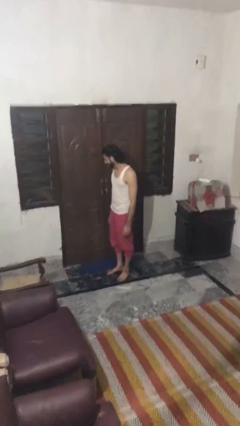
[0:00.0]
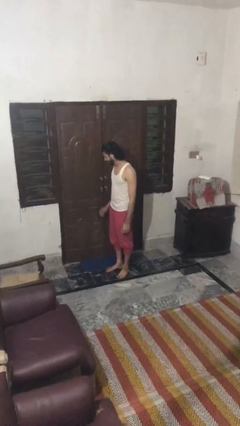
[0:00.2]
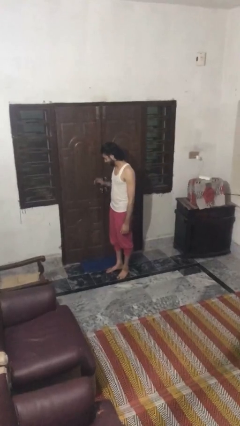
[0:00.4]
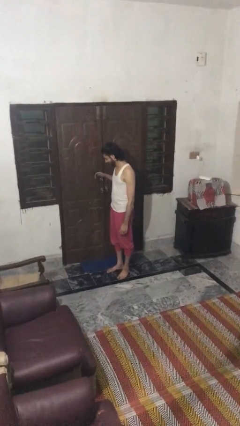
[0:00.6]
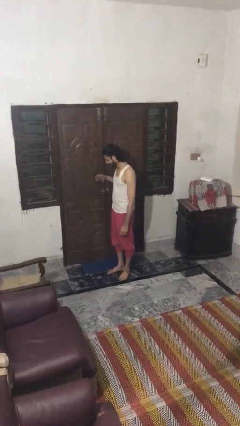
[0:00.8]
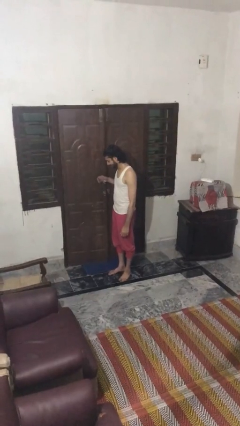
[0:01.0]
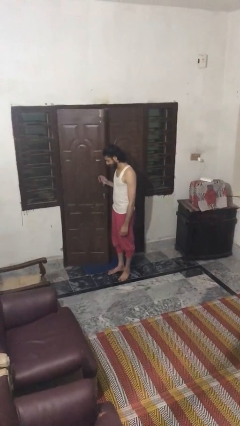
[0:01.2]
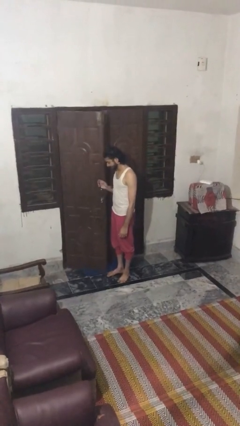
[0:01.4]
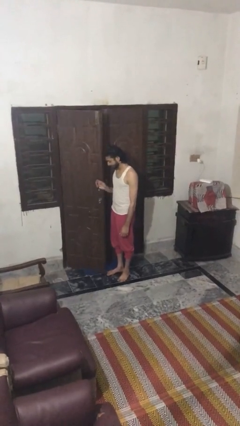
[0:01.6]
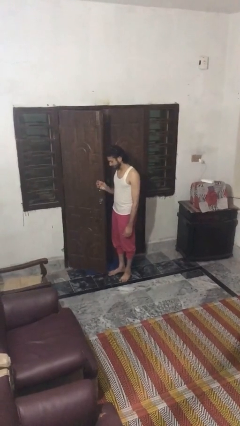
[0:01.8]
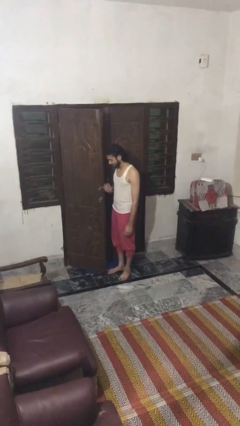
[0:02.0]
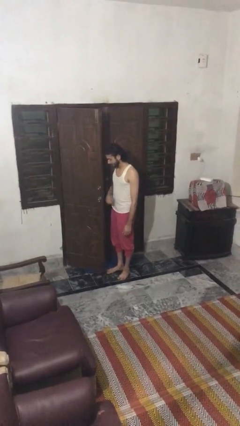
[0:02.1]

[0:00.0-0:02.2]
person opens facility door

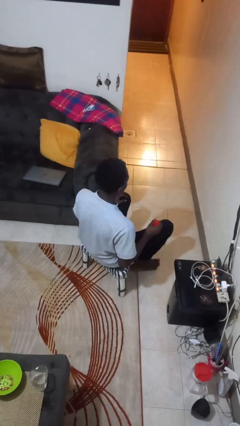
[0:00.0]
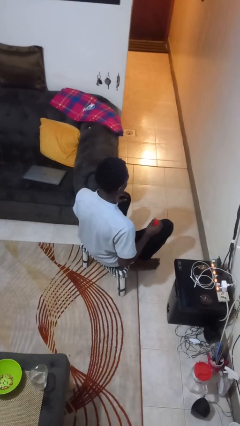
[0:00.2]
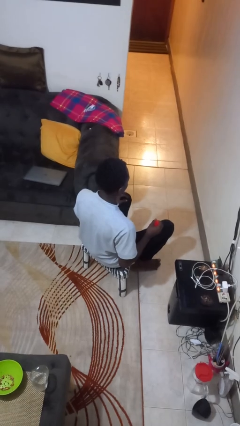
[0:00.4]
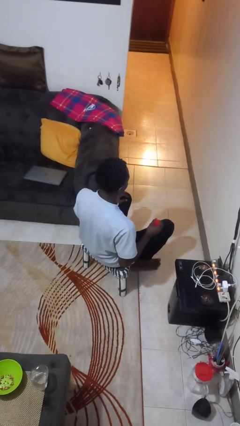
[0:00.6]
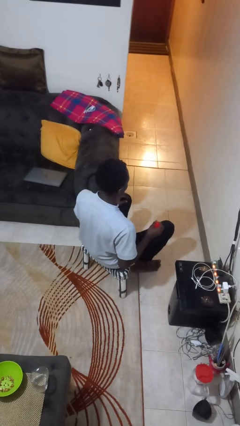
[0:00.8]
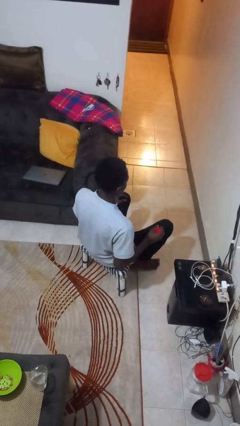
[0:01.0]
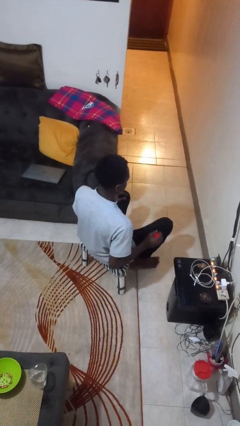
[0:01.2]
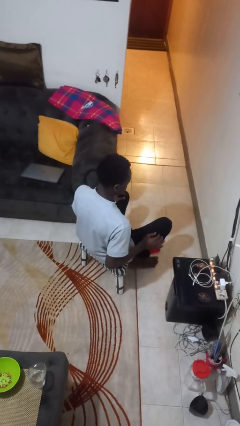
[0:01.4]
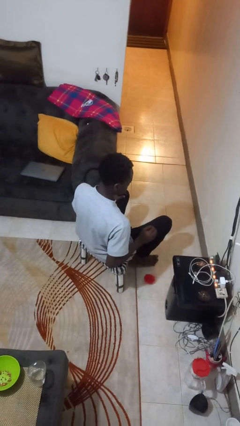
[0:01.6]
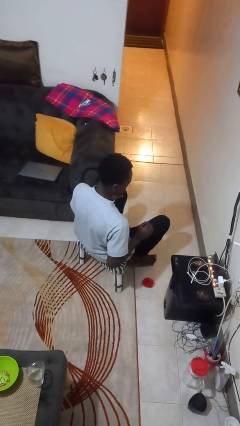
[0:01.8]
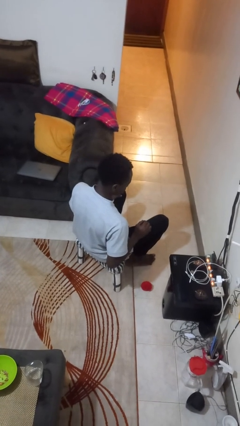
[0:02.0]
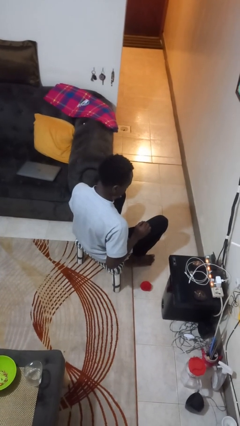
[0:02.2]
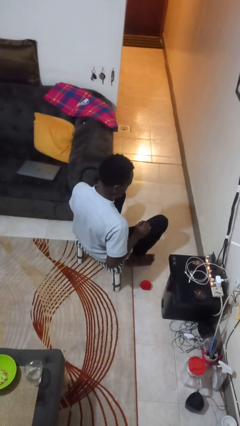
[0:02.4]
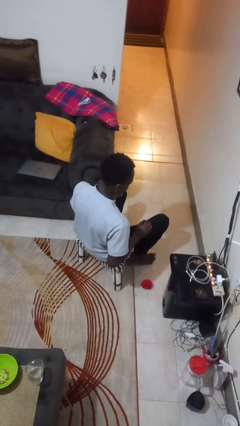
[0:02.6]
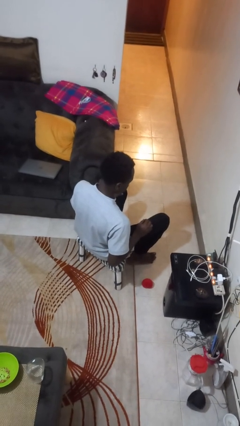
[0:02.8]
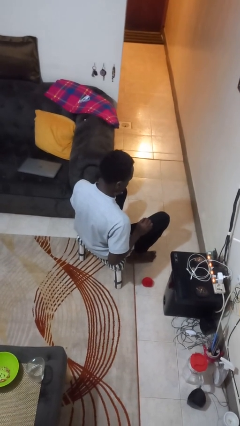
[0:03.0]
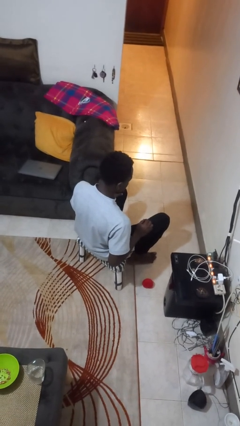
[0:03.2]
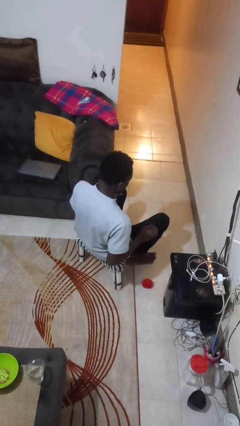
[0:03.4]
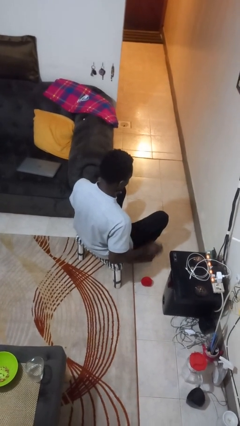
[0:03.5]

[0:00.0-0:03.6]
person drops object

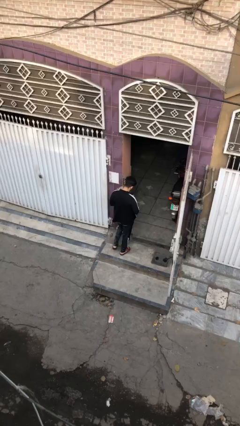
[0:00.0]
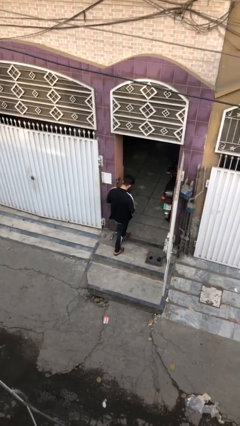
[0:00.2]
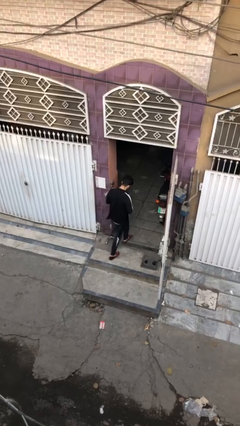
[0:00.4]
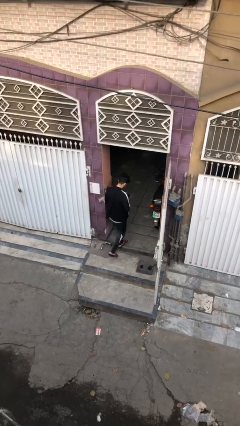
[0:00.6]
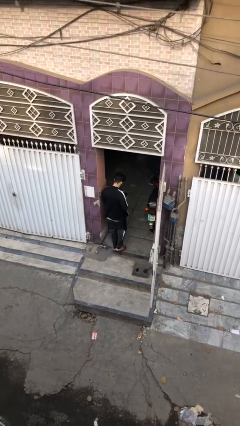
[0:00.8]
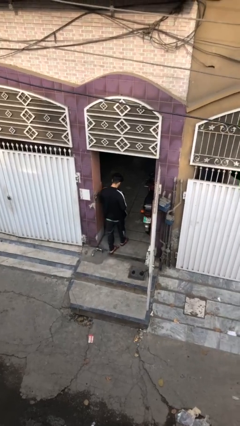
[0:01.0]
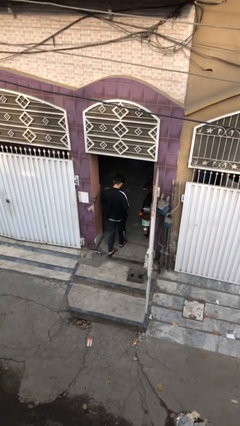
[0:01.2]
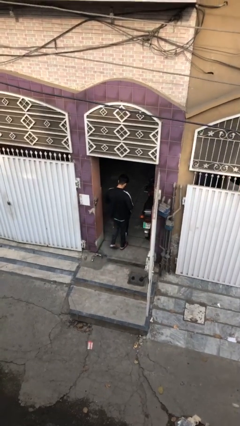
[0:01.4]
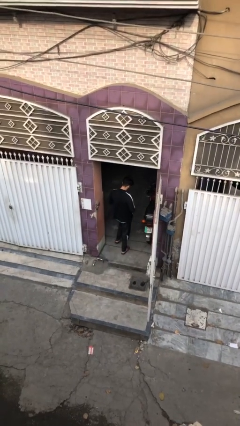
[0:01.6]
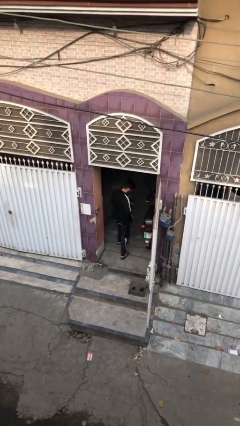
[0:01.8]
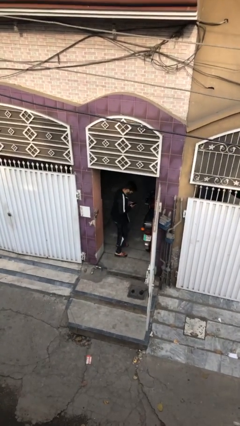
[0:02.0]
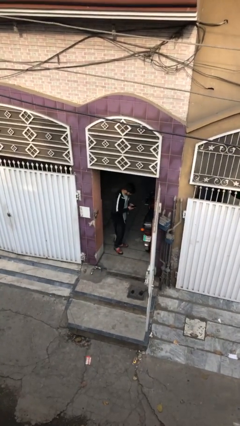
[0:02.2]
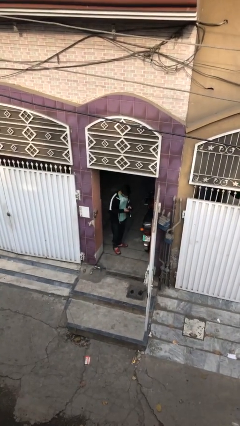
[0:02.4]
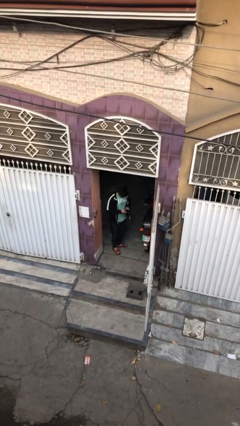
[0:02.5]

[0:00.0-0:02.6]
person exits scene through structure

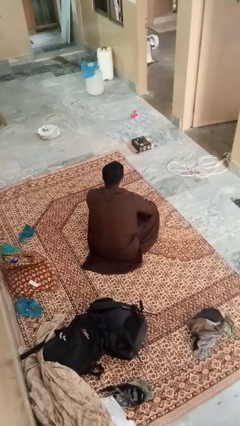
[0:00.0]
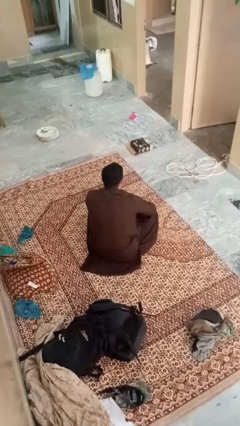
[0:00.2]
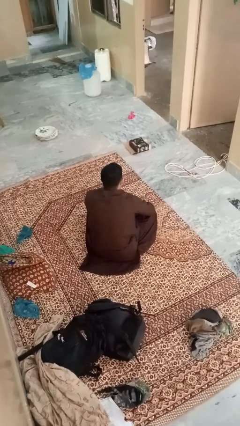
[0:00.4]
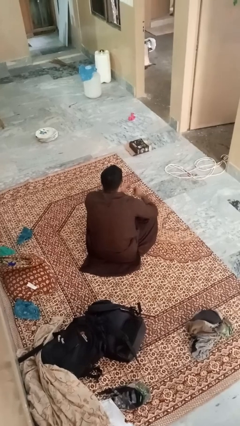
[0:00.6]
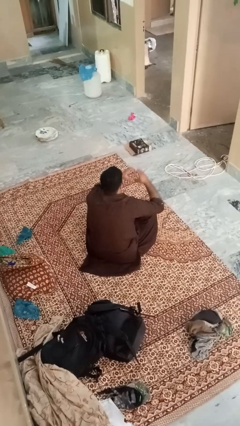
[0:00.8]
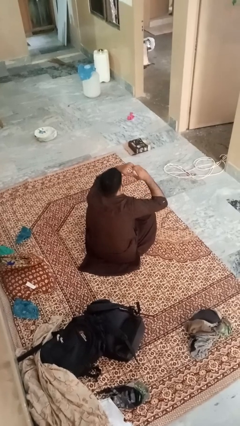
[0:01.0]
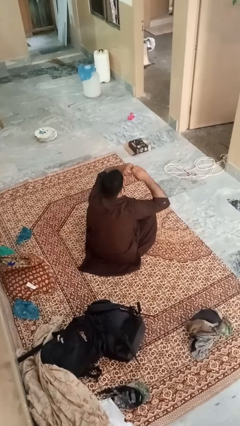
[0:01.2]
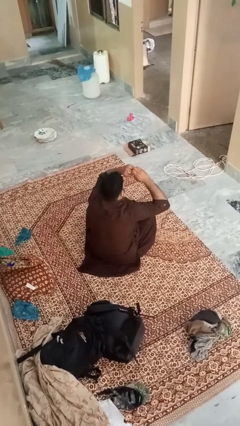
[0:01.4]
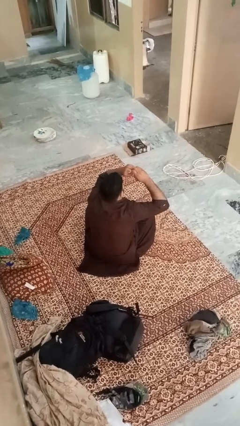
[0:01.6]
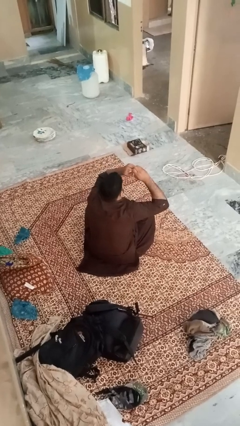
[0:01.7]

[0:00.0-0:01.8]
person gestures heart

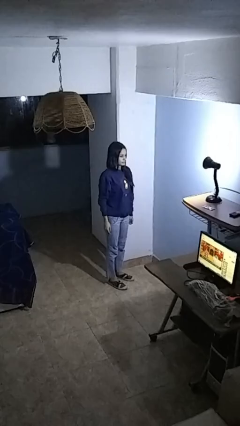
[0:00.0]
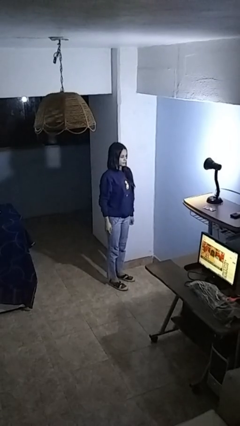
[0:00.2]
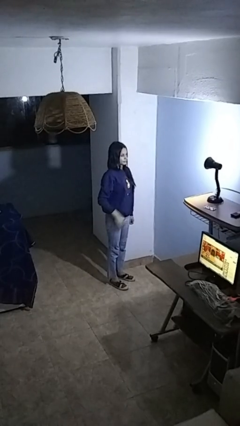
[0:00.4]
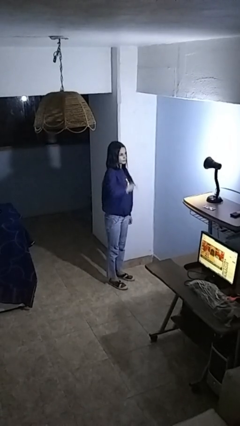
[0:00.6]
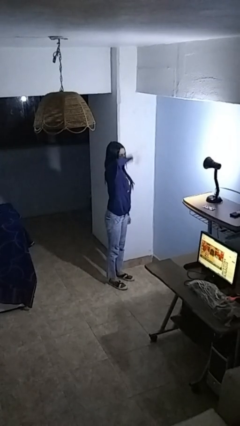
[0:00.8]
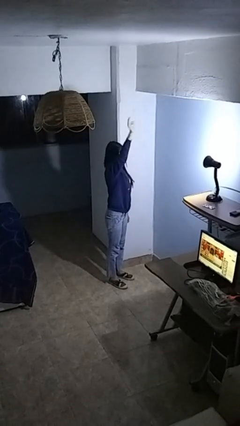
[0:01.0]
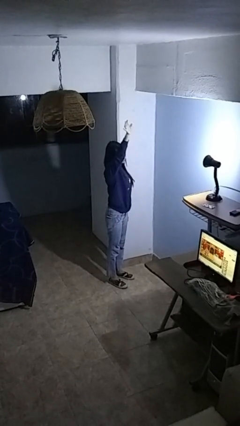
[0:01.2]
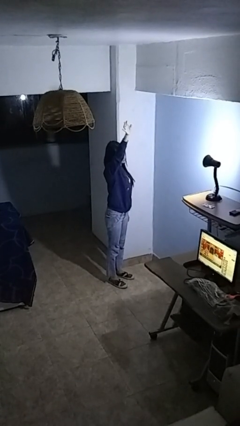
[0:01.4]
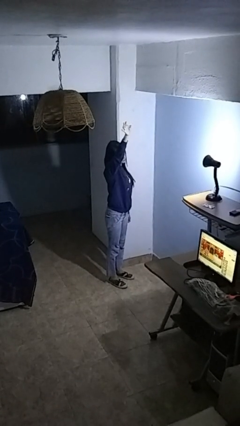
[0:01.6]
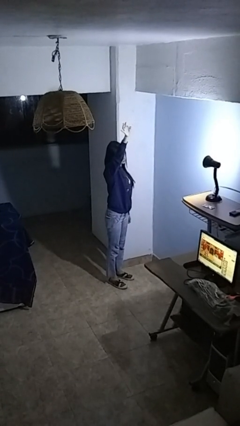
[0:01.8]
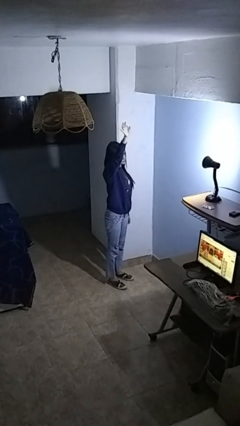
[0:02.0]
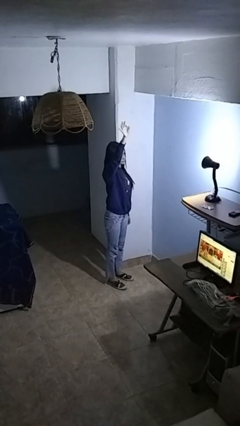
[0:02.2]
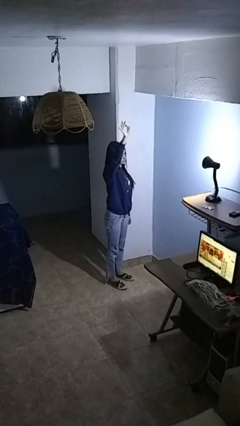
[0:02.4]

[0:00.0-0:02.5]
person gestures swipe up

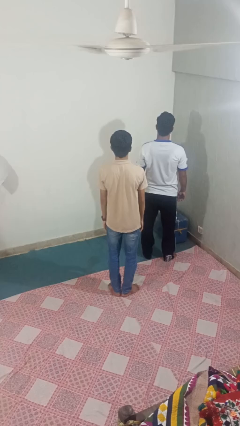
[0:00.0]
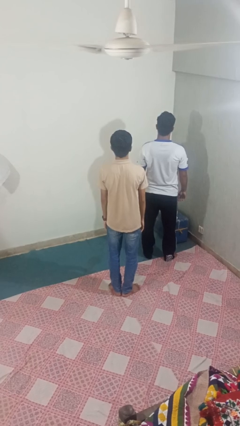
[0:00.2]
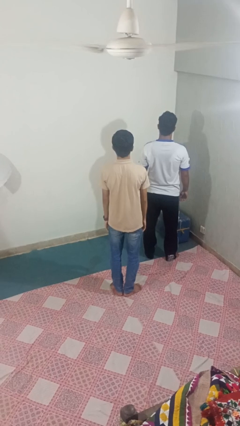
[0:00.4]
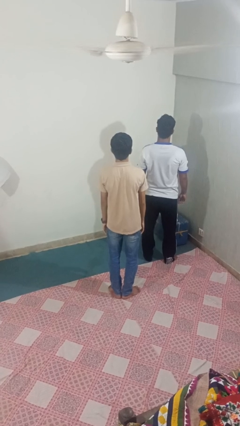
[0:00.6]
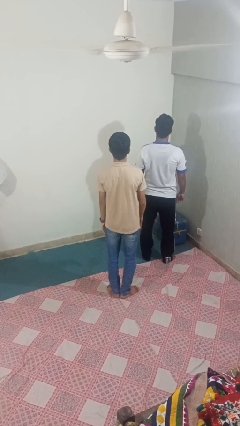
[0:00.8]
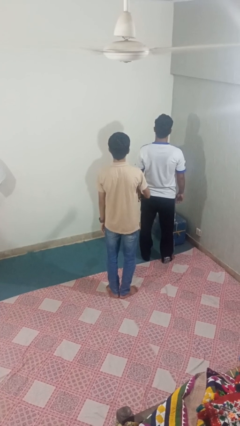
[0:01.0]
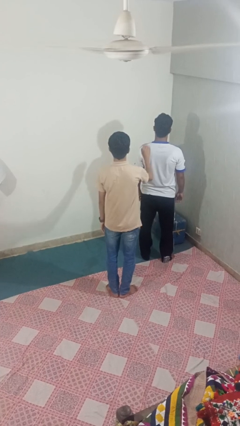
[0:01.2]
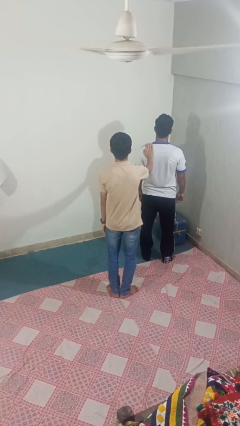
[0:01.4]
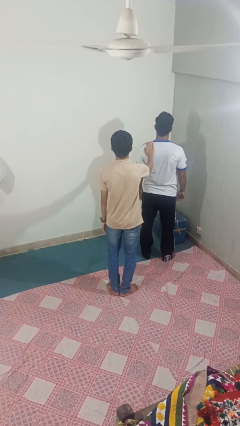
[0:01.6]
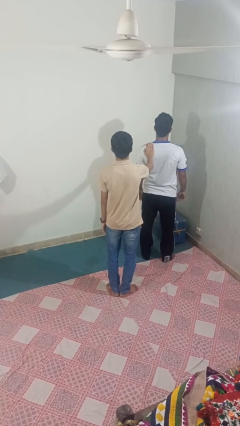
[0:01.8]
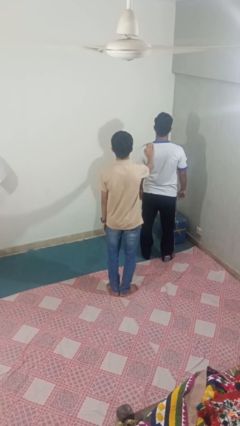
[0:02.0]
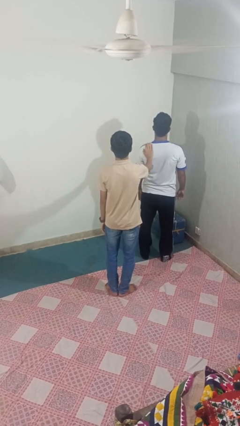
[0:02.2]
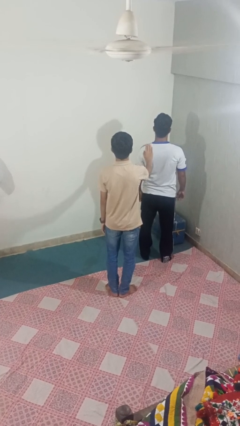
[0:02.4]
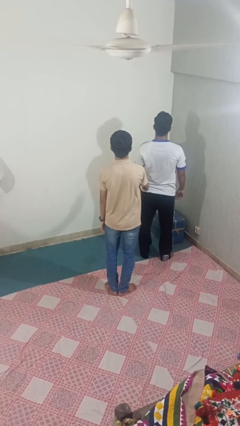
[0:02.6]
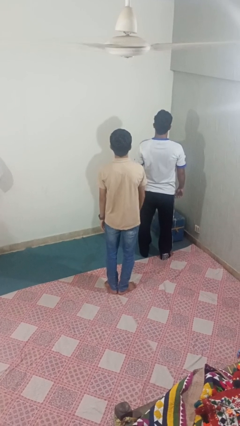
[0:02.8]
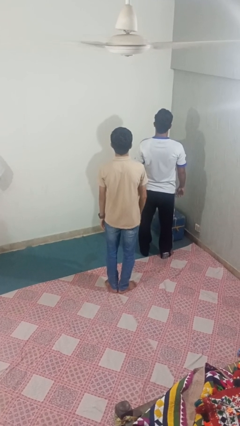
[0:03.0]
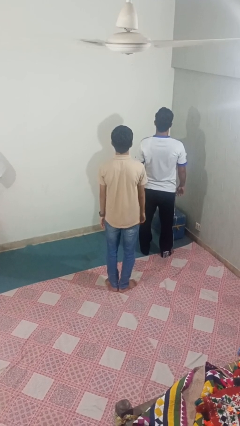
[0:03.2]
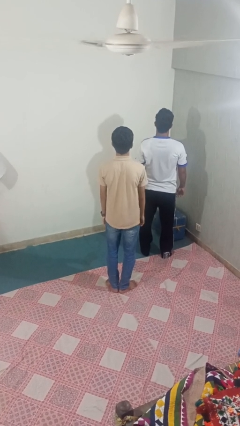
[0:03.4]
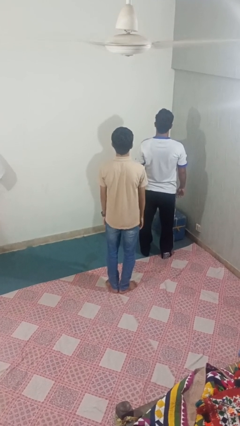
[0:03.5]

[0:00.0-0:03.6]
person touches back of person

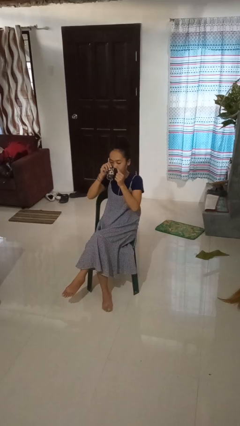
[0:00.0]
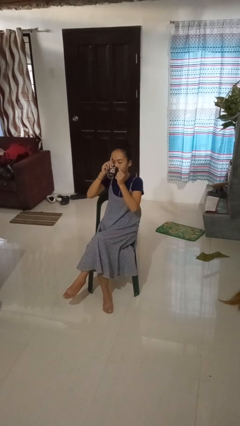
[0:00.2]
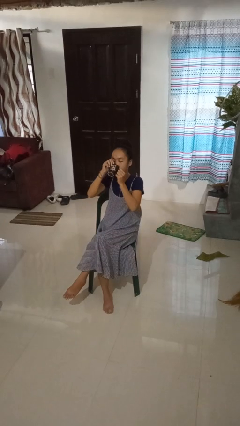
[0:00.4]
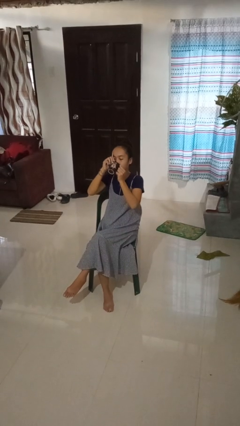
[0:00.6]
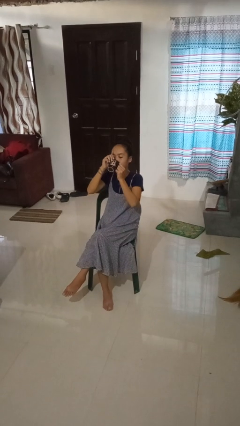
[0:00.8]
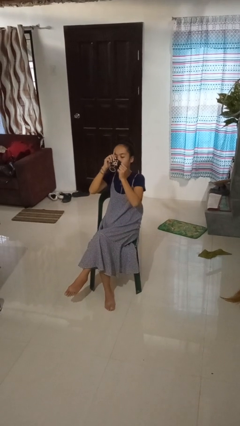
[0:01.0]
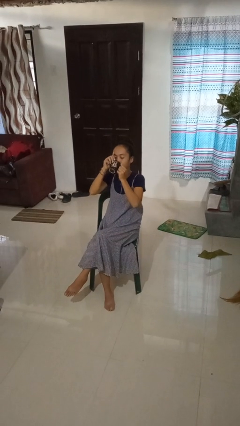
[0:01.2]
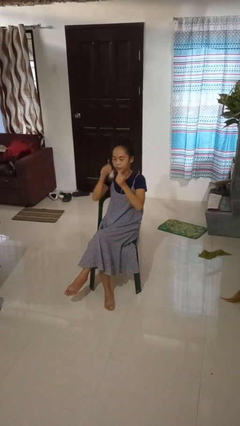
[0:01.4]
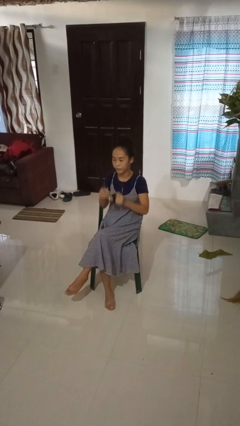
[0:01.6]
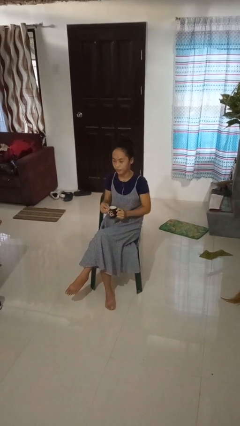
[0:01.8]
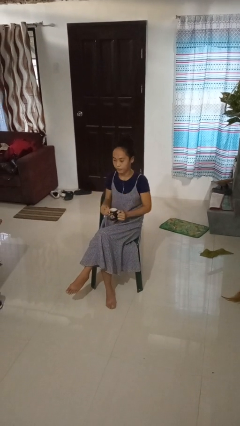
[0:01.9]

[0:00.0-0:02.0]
person drinks from mug
